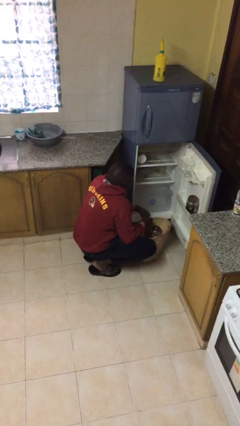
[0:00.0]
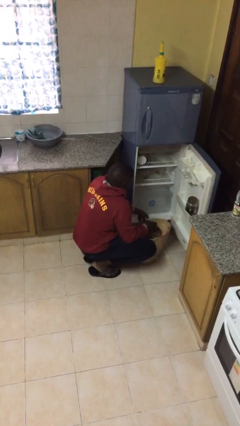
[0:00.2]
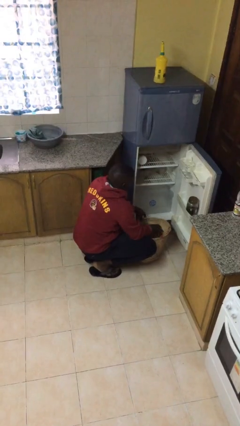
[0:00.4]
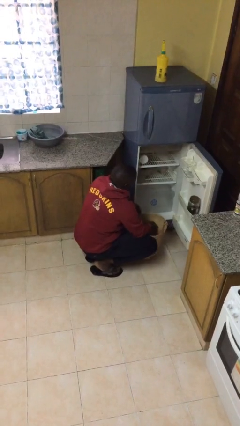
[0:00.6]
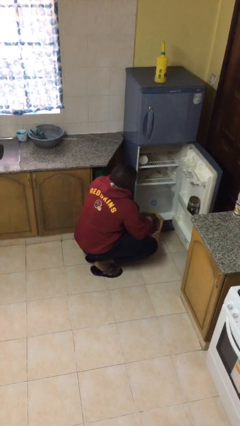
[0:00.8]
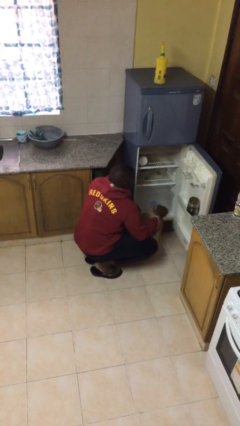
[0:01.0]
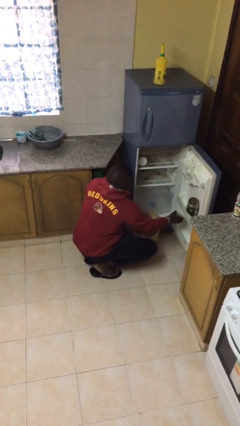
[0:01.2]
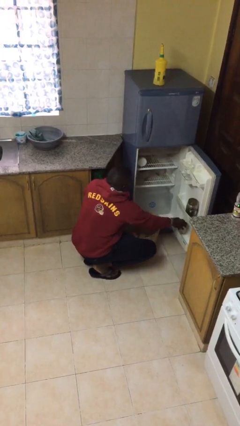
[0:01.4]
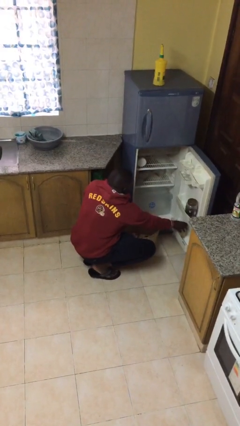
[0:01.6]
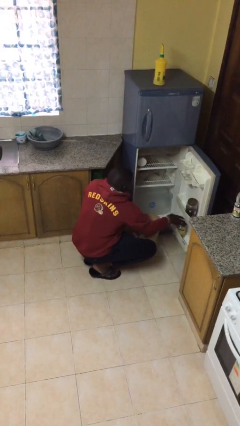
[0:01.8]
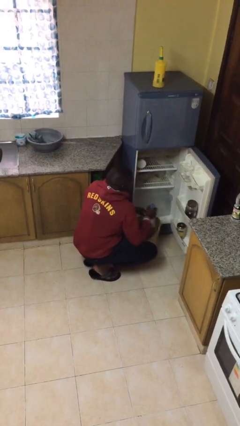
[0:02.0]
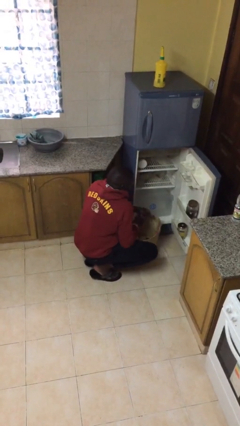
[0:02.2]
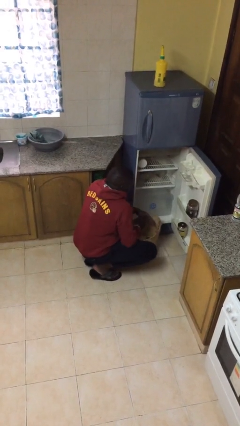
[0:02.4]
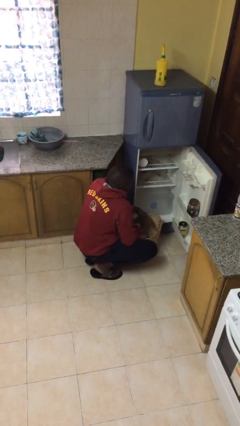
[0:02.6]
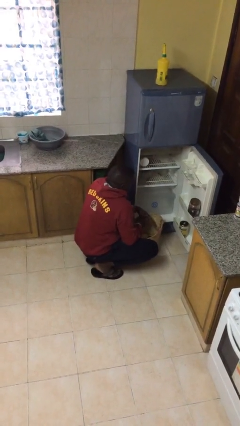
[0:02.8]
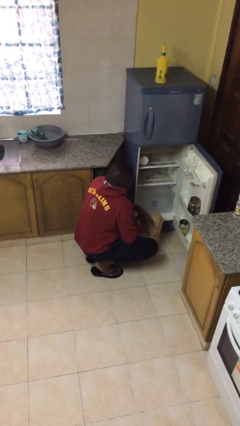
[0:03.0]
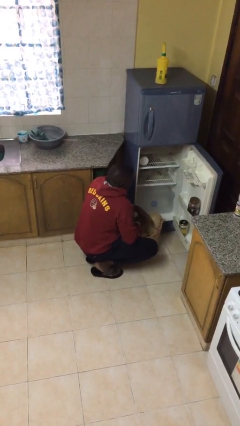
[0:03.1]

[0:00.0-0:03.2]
person loads groceries into refrigerator

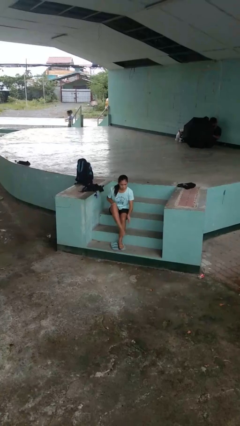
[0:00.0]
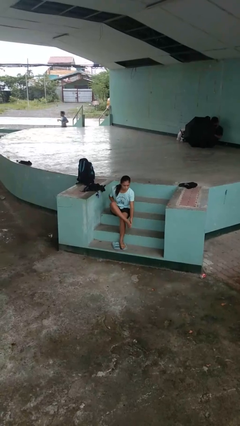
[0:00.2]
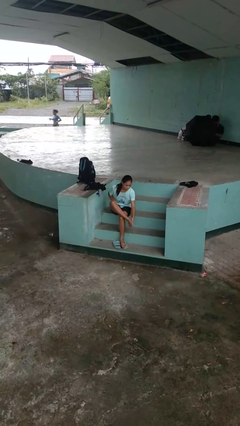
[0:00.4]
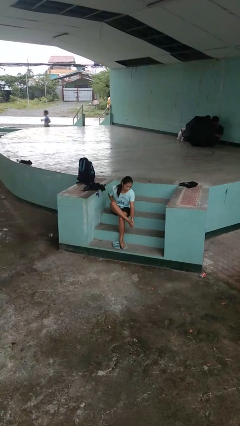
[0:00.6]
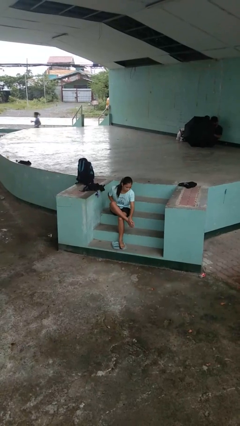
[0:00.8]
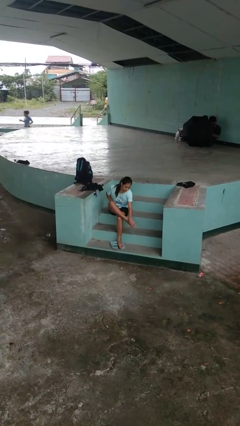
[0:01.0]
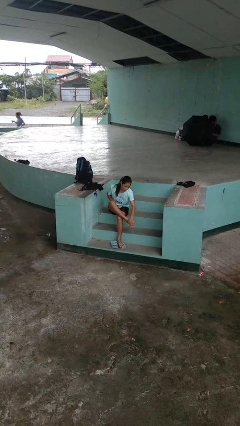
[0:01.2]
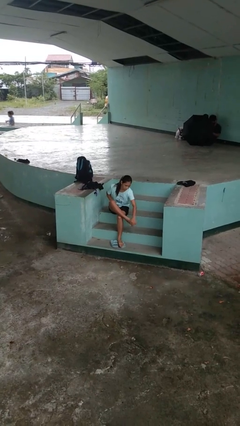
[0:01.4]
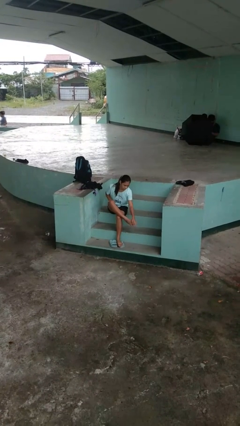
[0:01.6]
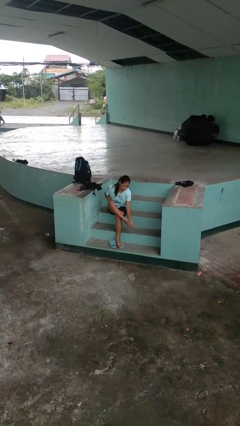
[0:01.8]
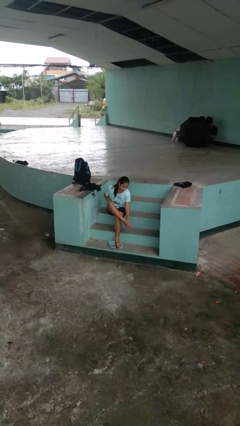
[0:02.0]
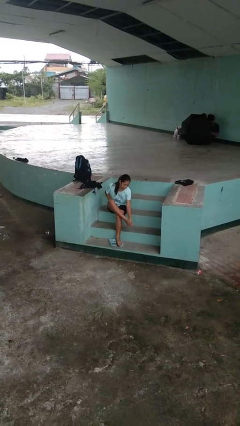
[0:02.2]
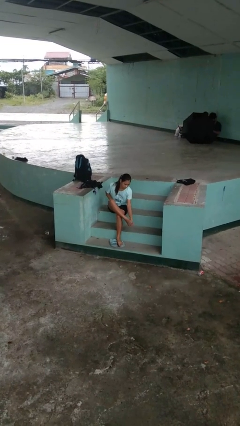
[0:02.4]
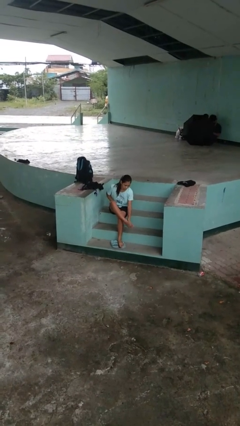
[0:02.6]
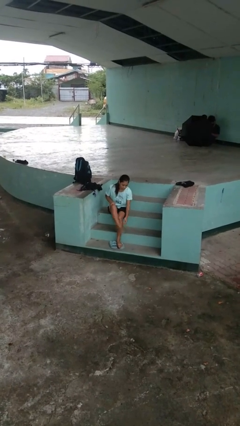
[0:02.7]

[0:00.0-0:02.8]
person rubs foot

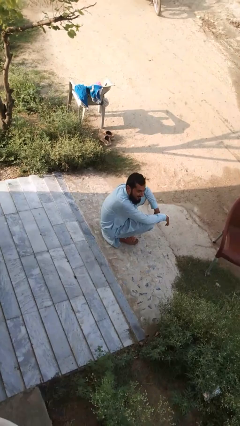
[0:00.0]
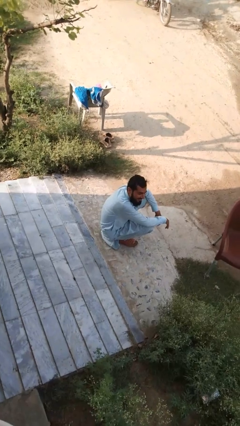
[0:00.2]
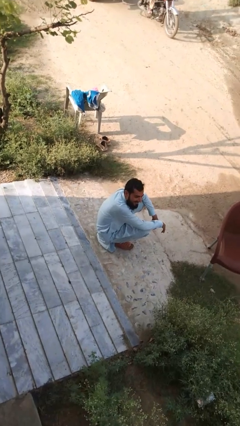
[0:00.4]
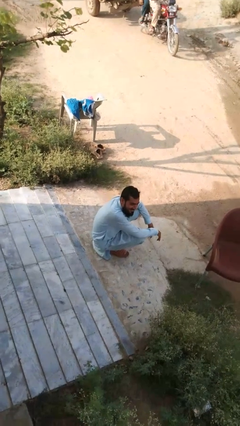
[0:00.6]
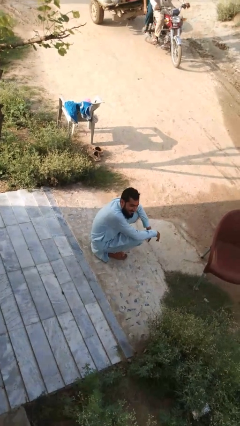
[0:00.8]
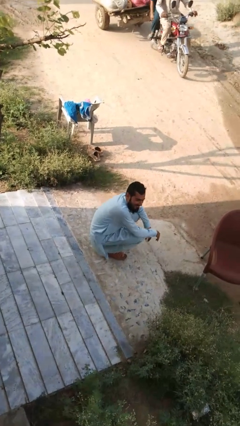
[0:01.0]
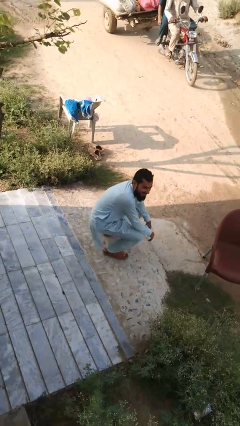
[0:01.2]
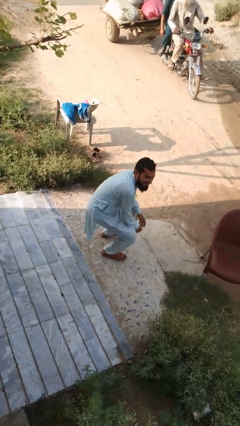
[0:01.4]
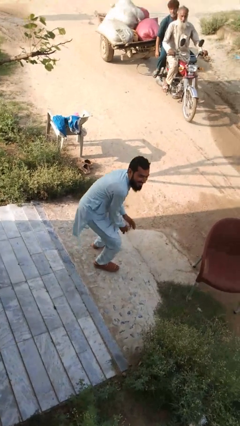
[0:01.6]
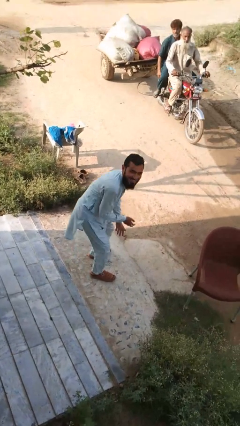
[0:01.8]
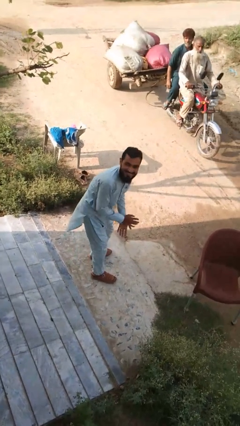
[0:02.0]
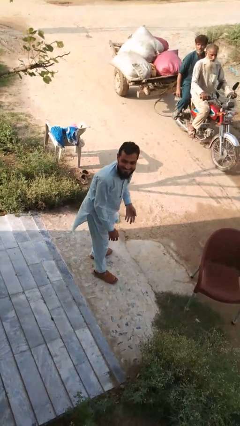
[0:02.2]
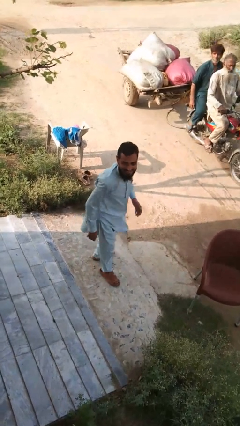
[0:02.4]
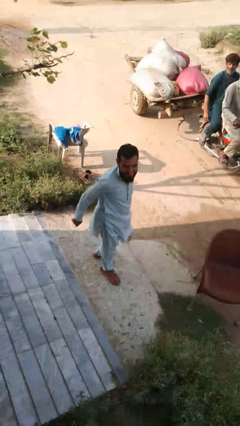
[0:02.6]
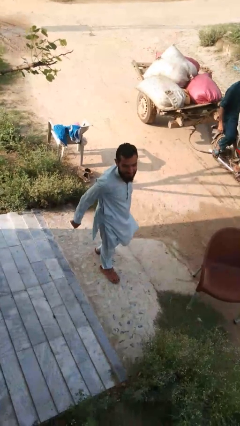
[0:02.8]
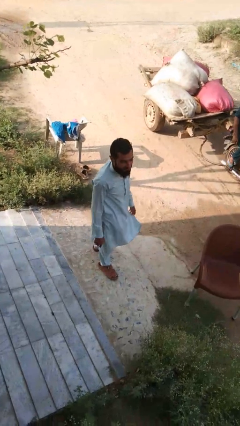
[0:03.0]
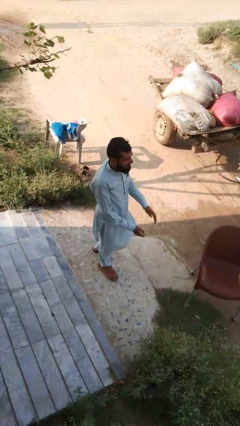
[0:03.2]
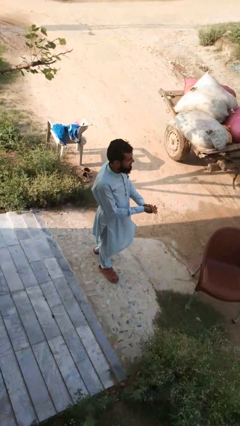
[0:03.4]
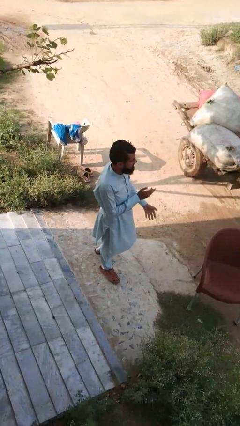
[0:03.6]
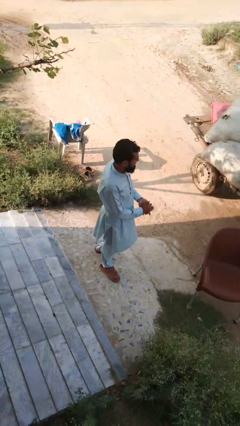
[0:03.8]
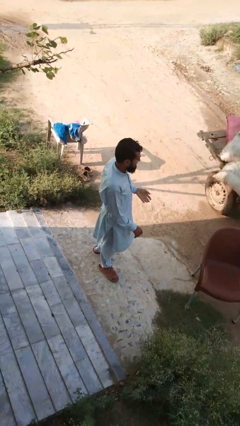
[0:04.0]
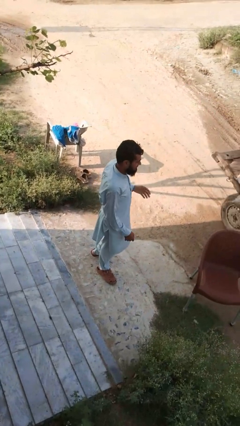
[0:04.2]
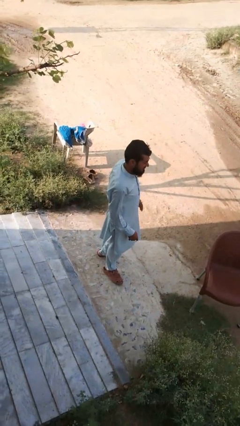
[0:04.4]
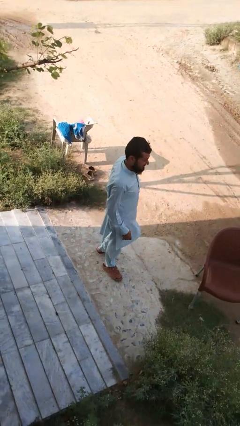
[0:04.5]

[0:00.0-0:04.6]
person stands up from floor

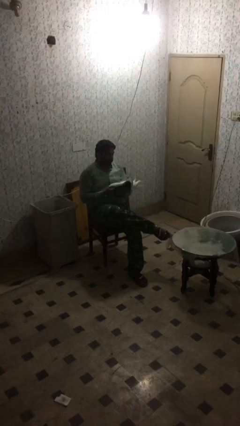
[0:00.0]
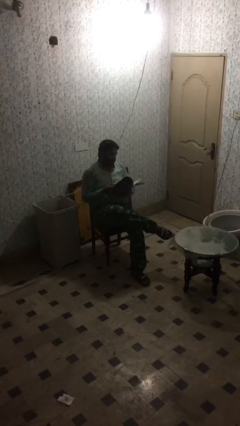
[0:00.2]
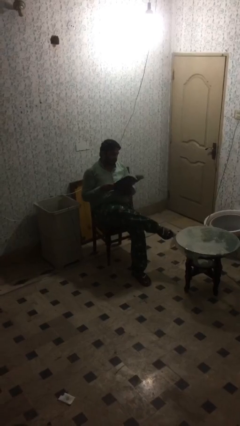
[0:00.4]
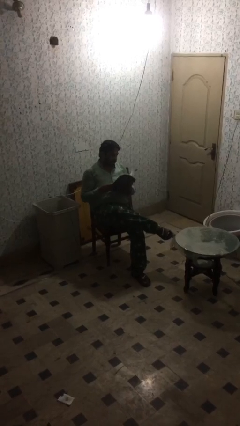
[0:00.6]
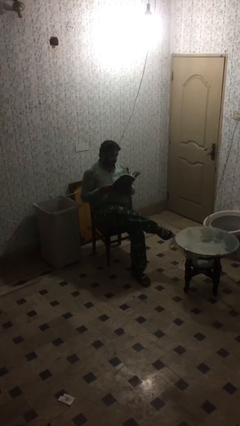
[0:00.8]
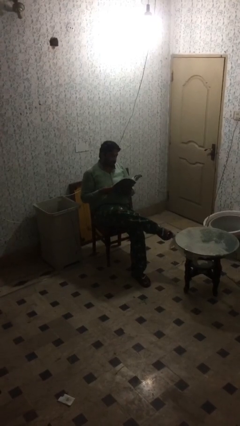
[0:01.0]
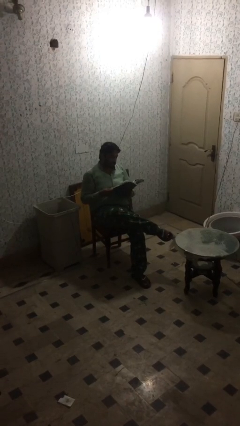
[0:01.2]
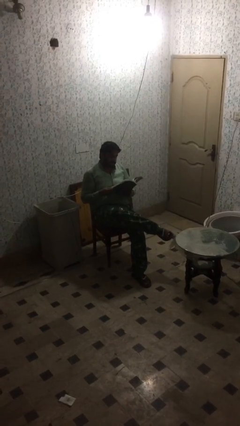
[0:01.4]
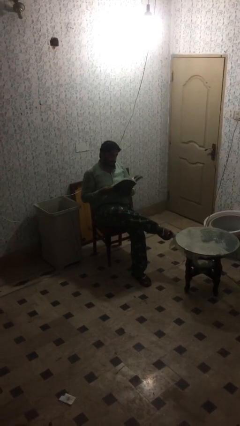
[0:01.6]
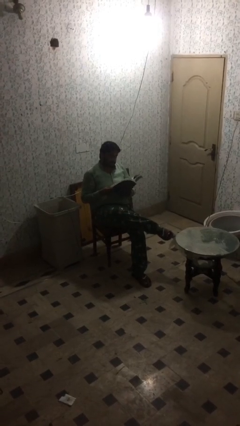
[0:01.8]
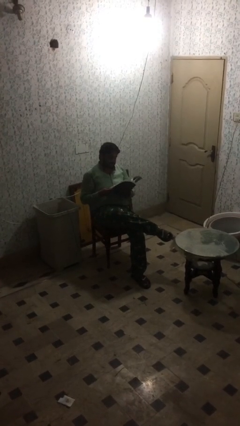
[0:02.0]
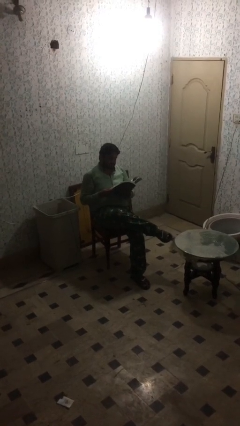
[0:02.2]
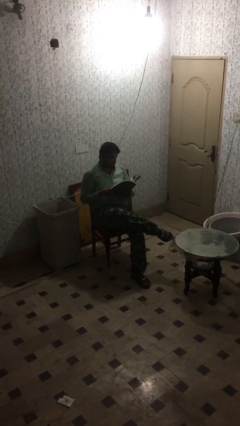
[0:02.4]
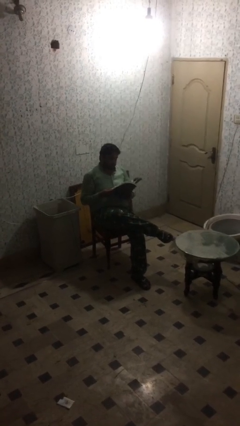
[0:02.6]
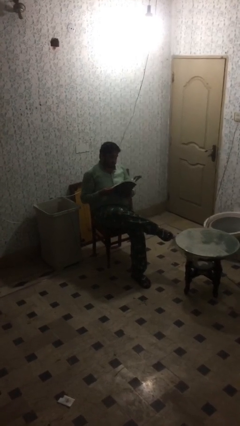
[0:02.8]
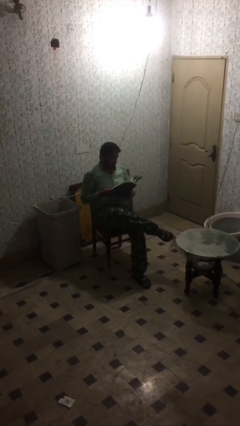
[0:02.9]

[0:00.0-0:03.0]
person reads document

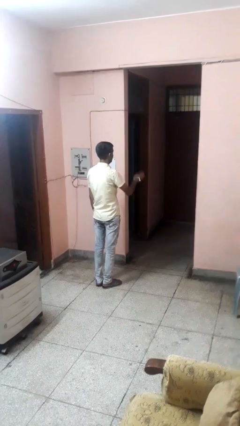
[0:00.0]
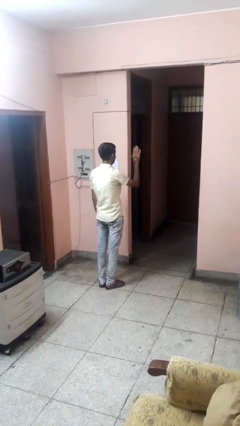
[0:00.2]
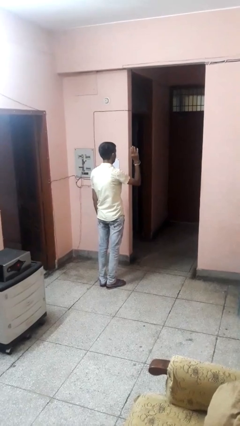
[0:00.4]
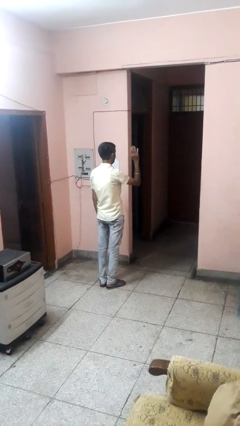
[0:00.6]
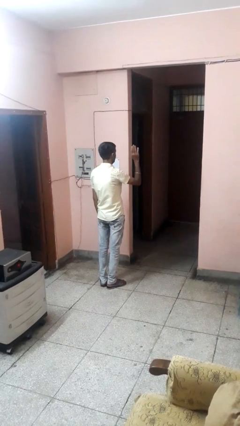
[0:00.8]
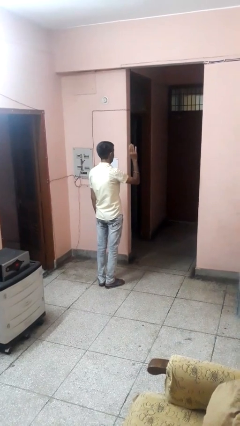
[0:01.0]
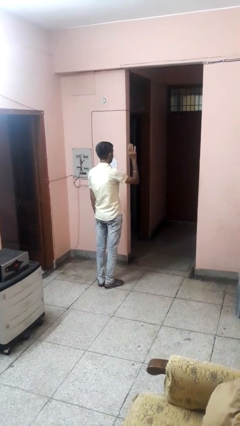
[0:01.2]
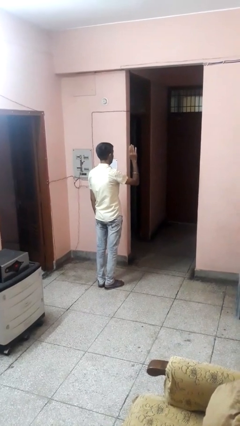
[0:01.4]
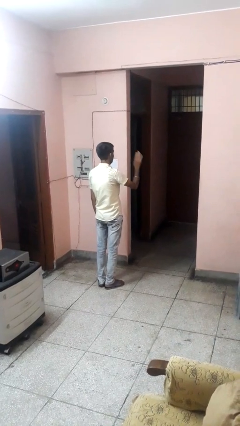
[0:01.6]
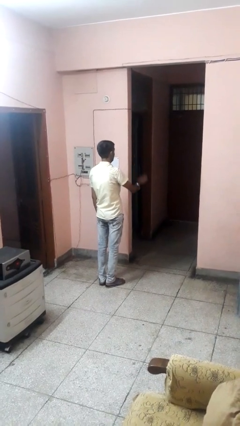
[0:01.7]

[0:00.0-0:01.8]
person gestures swipe up

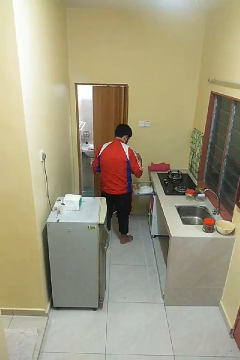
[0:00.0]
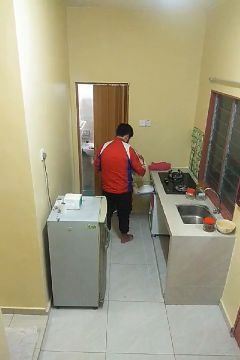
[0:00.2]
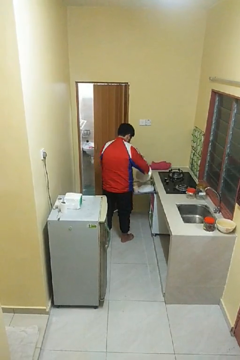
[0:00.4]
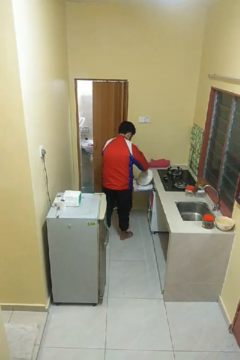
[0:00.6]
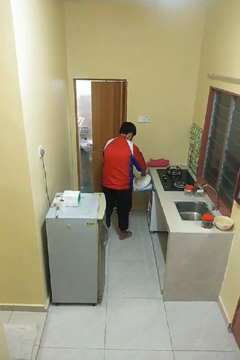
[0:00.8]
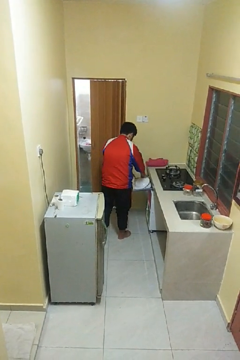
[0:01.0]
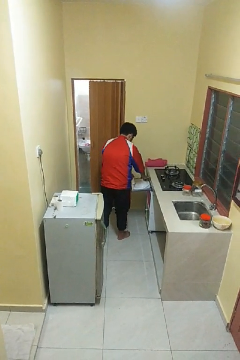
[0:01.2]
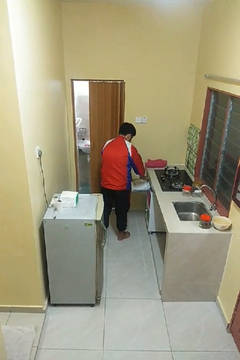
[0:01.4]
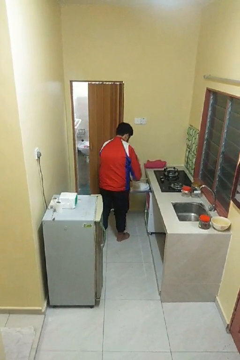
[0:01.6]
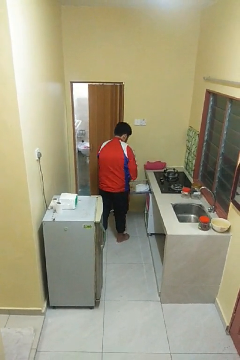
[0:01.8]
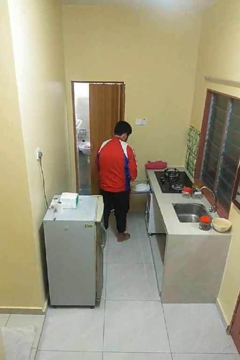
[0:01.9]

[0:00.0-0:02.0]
person puts object into kitchen drawer
